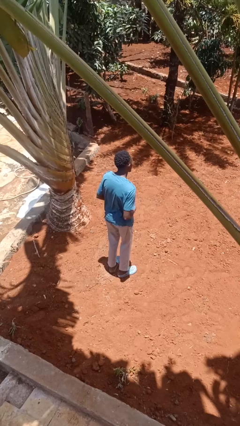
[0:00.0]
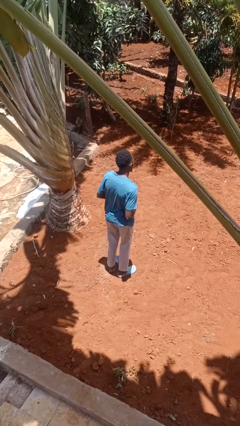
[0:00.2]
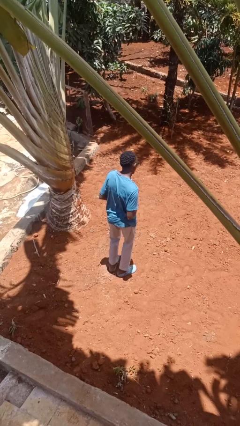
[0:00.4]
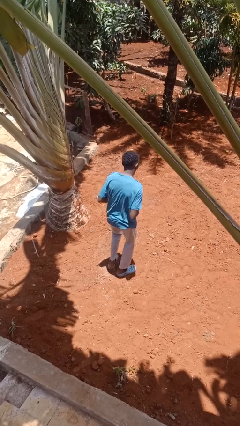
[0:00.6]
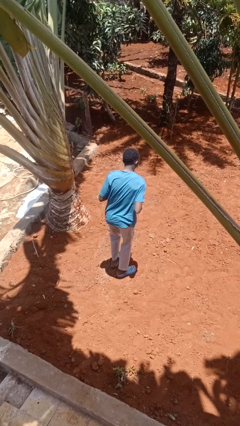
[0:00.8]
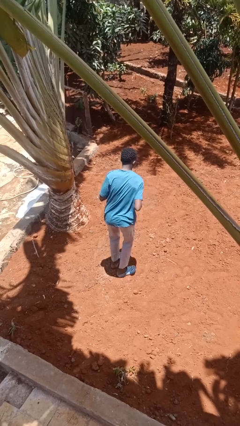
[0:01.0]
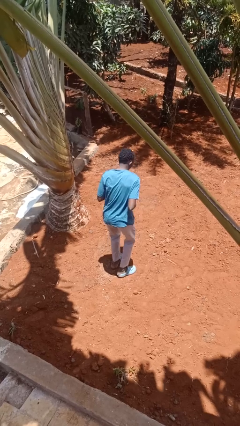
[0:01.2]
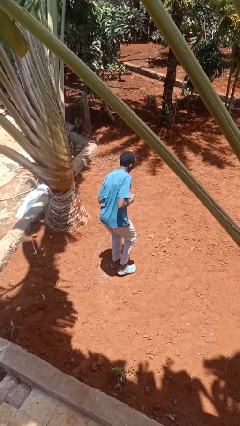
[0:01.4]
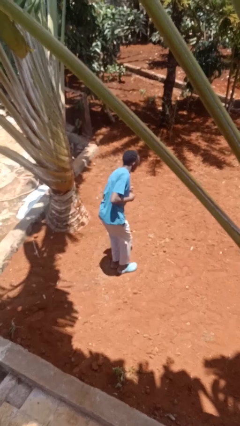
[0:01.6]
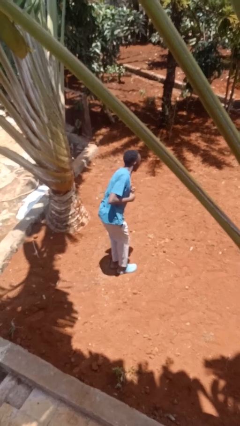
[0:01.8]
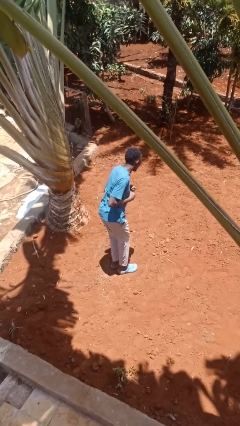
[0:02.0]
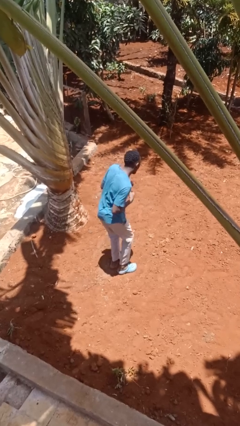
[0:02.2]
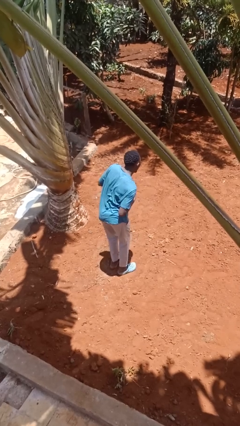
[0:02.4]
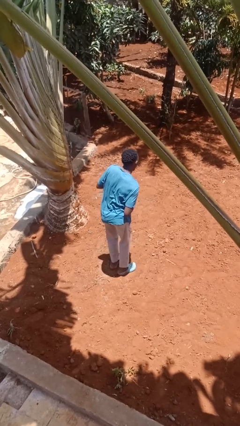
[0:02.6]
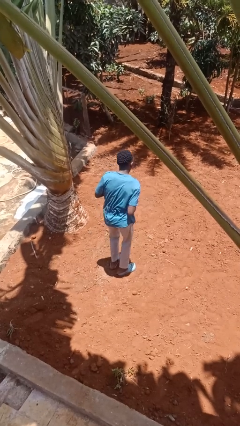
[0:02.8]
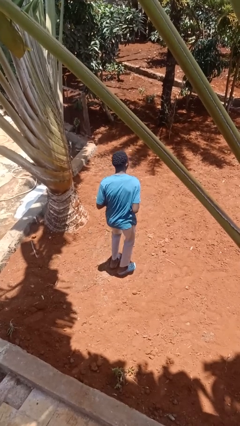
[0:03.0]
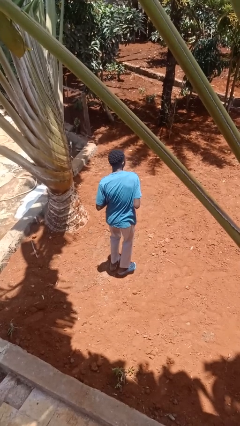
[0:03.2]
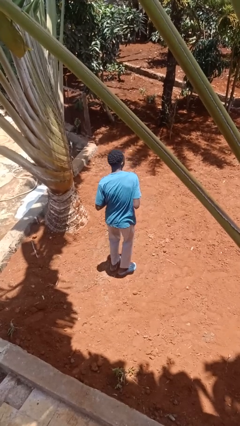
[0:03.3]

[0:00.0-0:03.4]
person dances in place

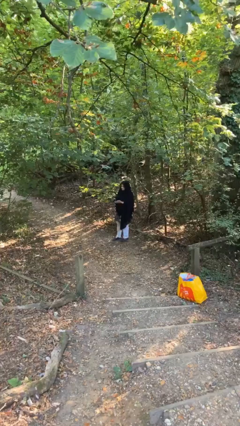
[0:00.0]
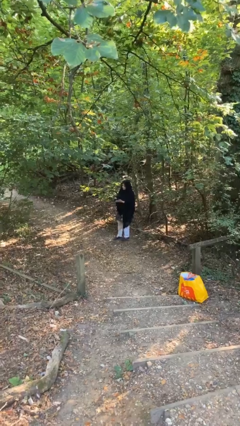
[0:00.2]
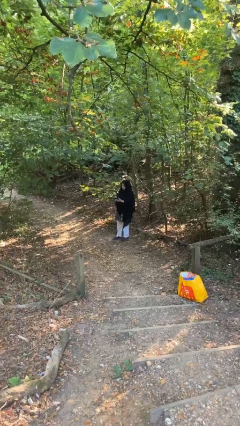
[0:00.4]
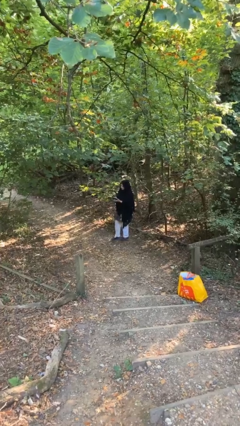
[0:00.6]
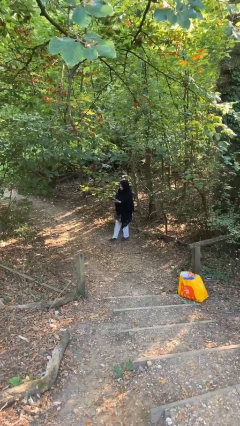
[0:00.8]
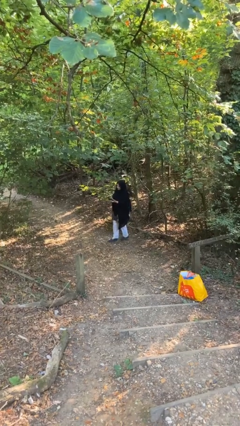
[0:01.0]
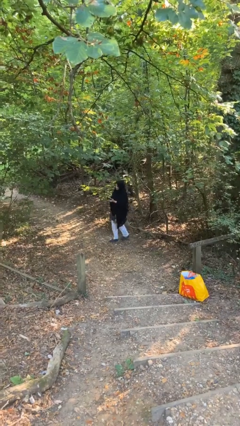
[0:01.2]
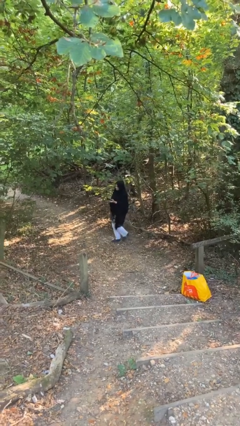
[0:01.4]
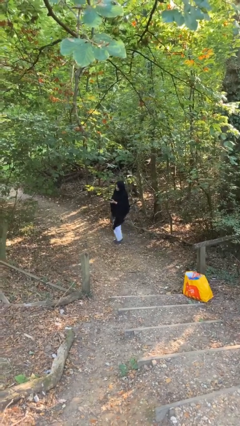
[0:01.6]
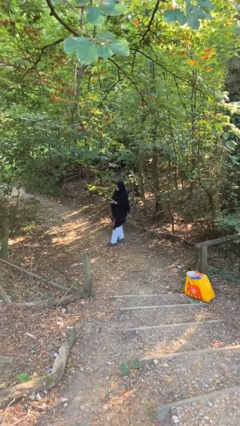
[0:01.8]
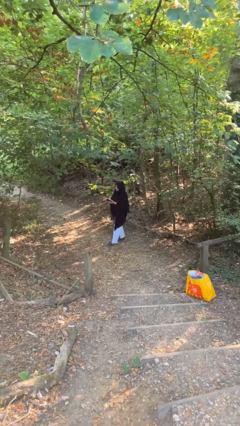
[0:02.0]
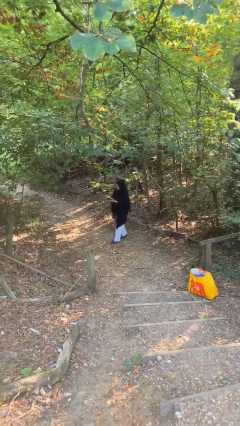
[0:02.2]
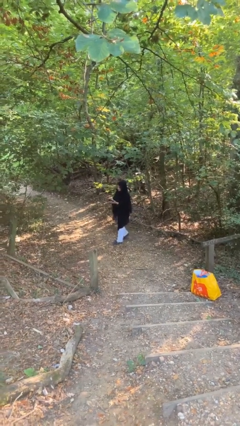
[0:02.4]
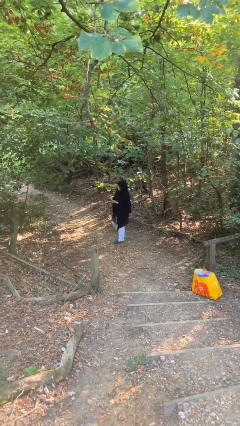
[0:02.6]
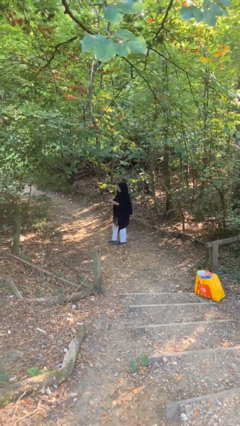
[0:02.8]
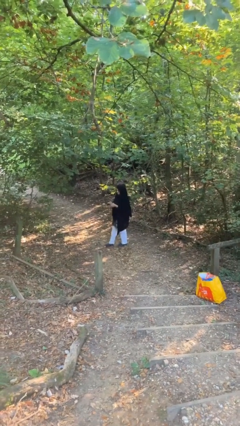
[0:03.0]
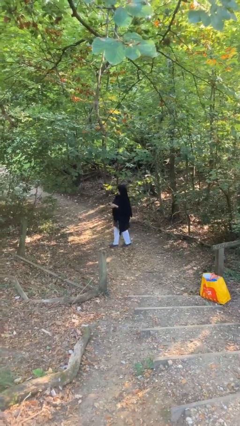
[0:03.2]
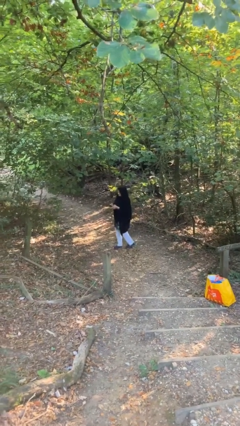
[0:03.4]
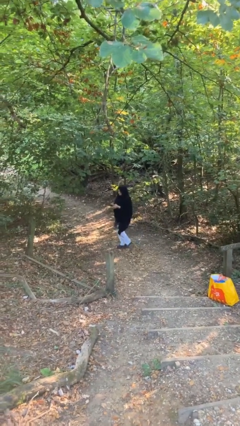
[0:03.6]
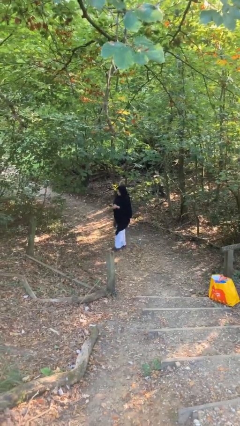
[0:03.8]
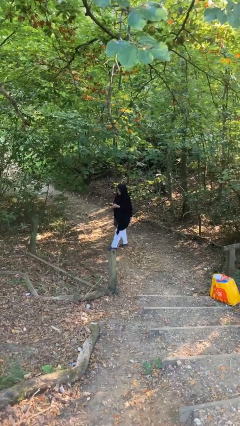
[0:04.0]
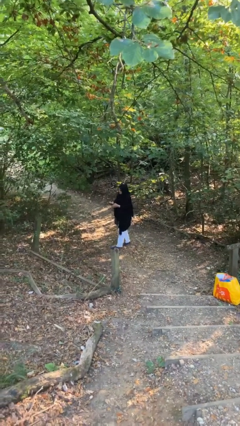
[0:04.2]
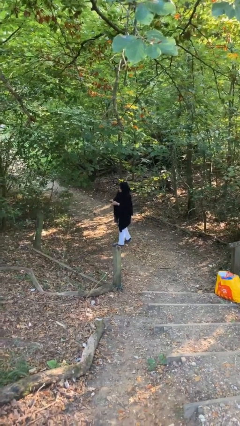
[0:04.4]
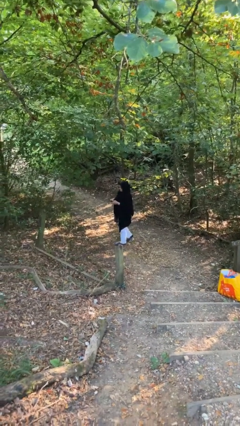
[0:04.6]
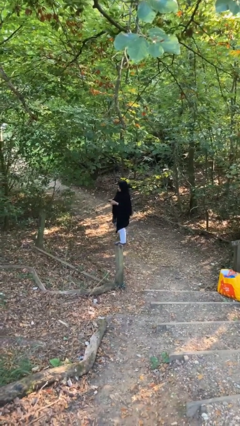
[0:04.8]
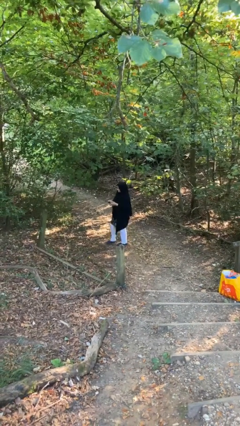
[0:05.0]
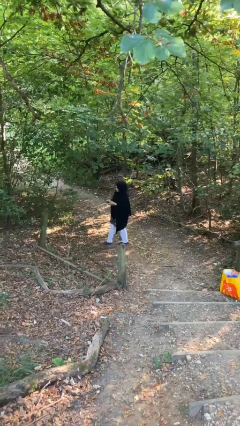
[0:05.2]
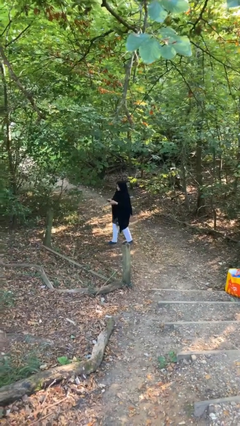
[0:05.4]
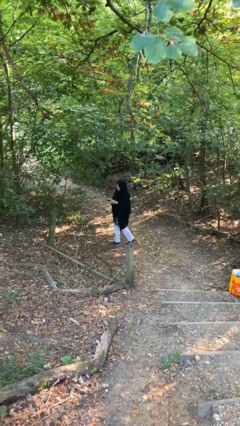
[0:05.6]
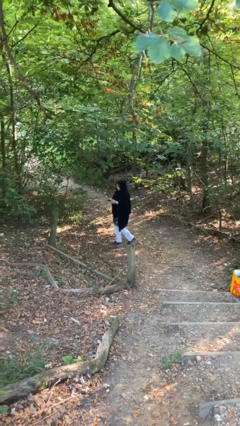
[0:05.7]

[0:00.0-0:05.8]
person texts on phone

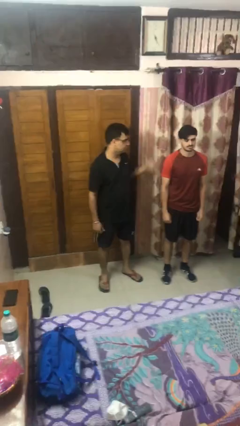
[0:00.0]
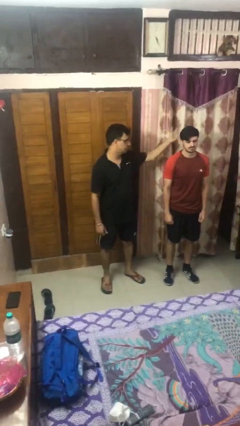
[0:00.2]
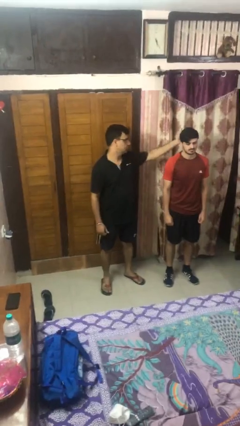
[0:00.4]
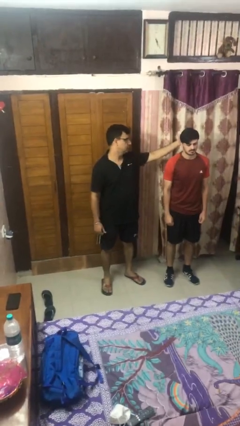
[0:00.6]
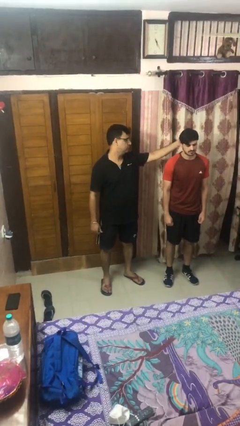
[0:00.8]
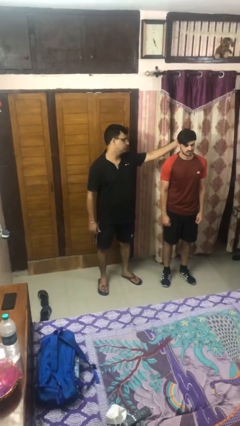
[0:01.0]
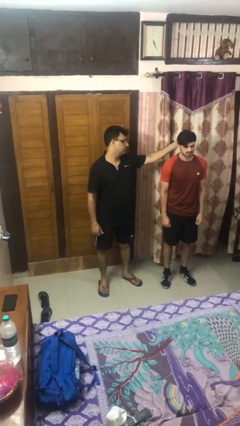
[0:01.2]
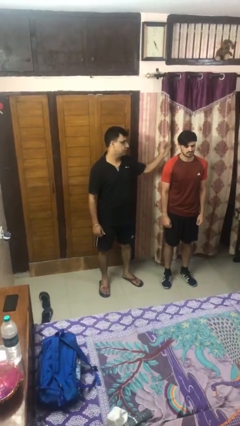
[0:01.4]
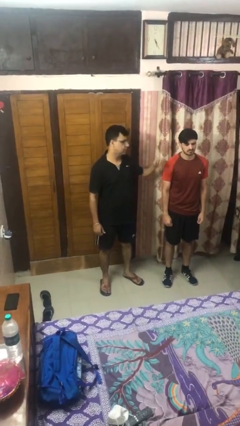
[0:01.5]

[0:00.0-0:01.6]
person grabs person by hair

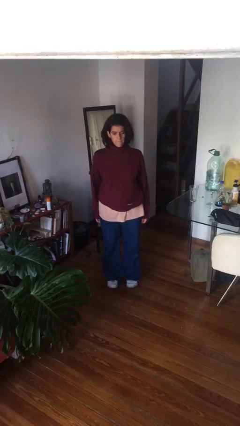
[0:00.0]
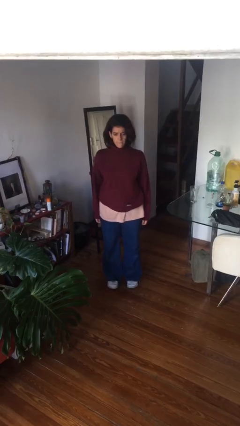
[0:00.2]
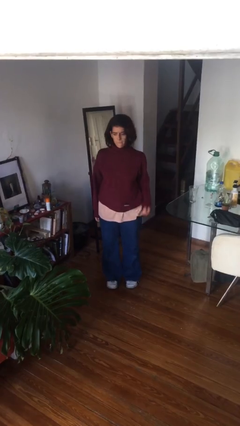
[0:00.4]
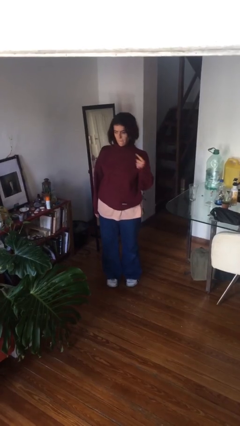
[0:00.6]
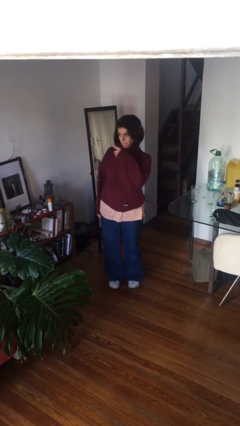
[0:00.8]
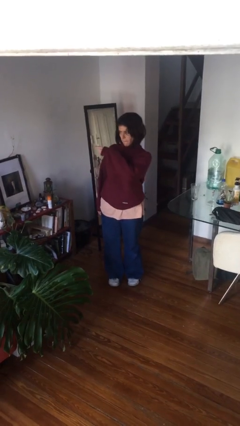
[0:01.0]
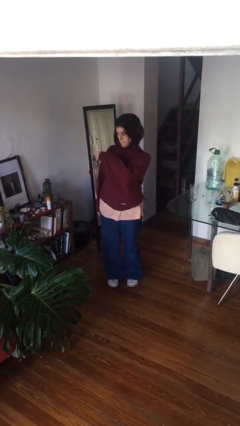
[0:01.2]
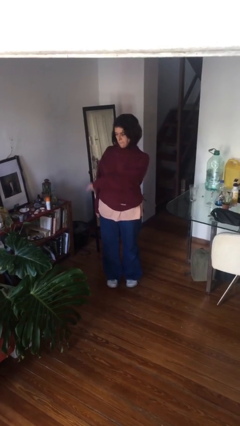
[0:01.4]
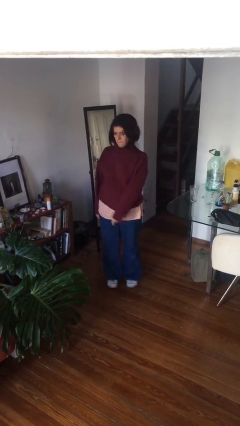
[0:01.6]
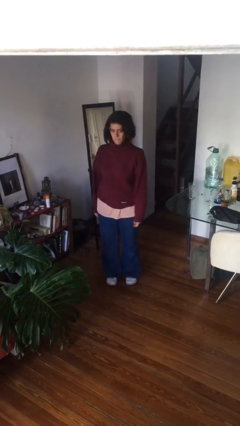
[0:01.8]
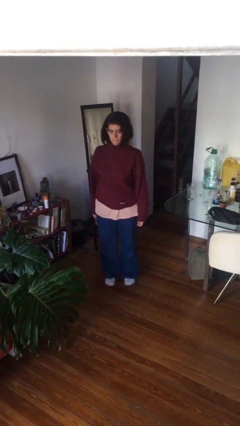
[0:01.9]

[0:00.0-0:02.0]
person gestures swipe right

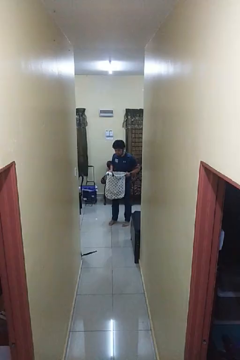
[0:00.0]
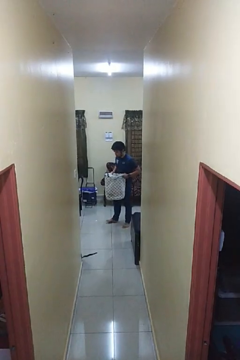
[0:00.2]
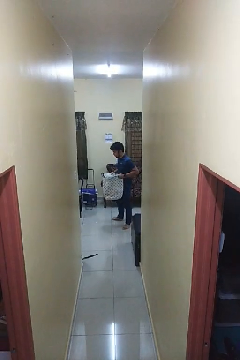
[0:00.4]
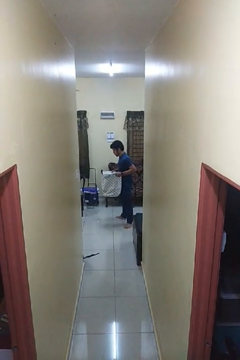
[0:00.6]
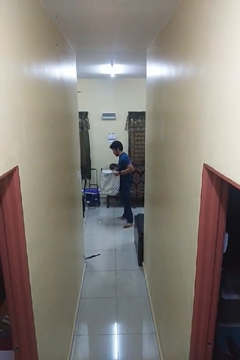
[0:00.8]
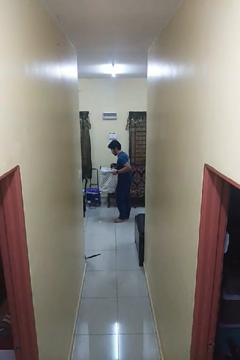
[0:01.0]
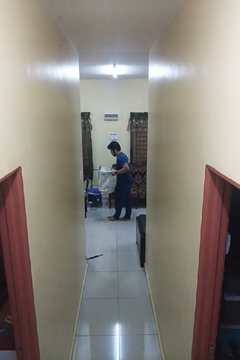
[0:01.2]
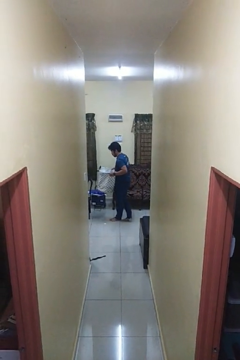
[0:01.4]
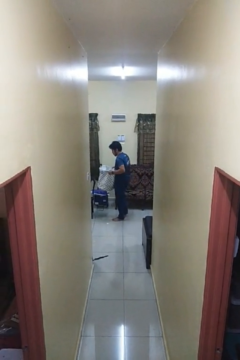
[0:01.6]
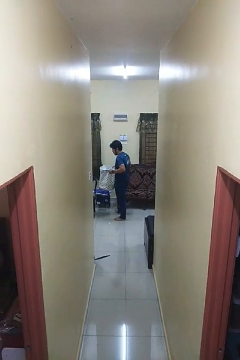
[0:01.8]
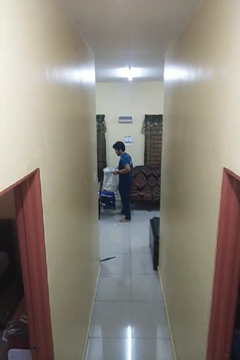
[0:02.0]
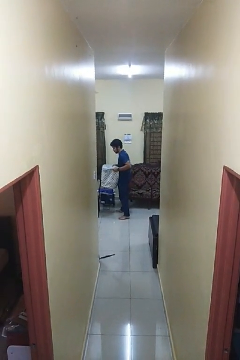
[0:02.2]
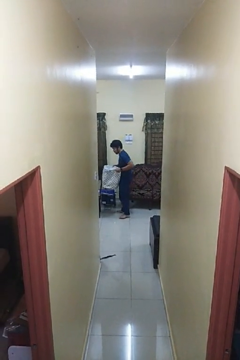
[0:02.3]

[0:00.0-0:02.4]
person carries laundry basket

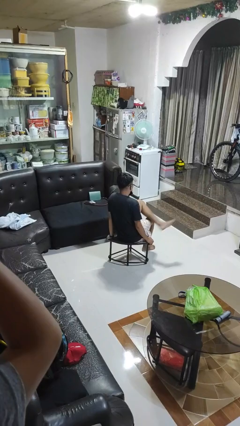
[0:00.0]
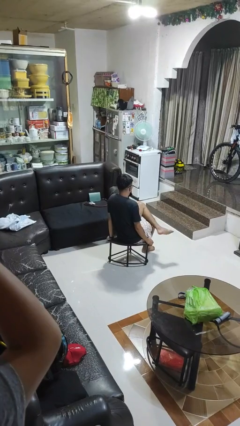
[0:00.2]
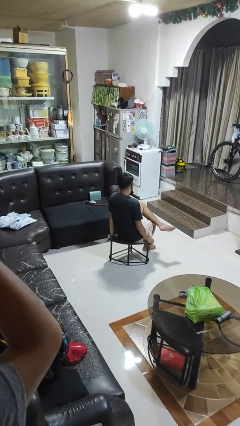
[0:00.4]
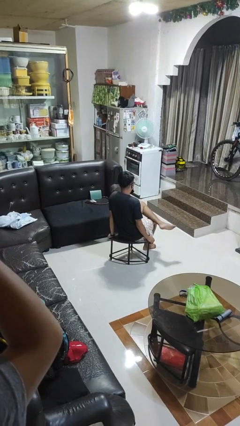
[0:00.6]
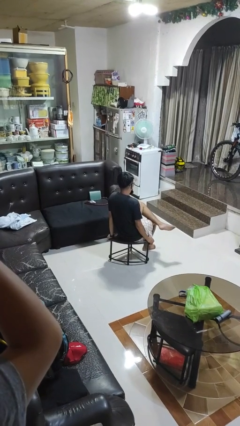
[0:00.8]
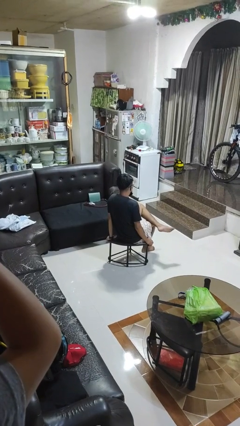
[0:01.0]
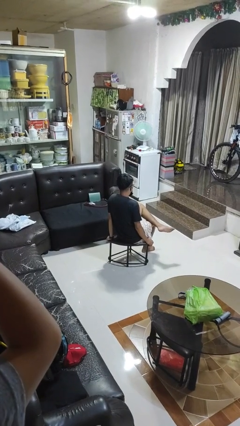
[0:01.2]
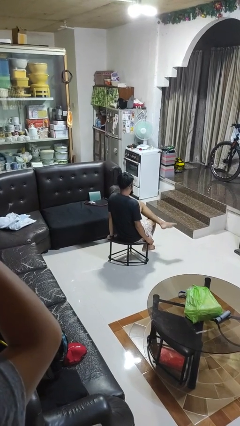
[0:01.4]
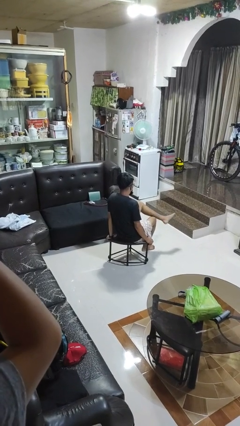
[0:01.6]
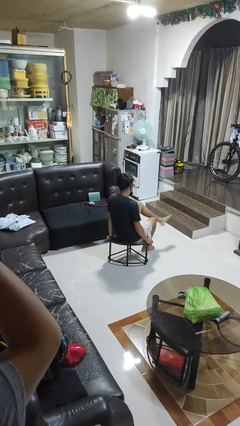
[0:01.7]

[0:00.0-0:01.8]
person crosses legs

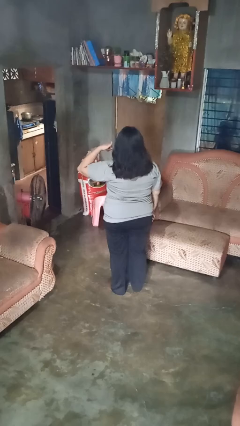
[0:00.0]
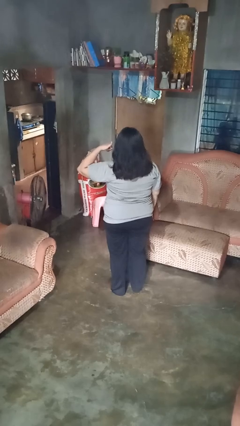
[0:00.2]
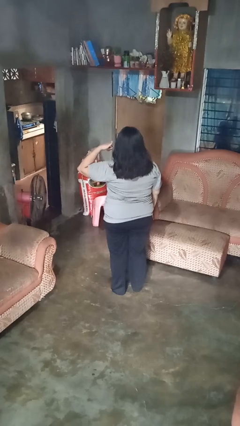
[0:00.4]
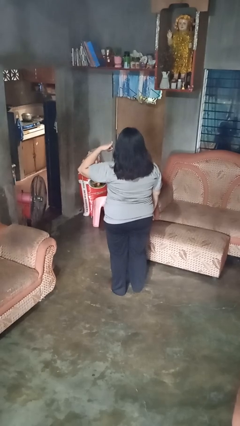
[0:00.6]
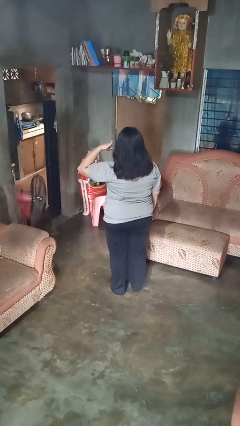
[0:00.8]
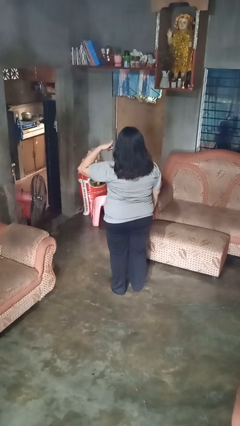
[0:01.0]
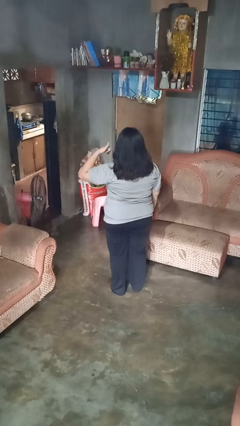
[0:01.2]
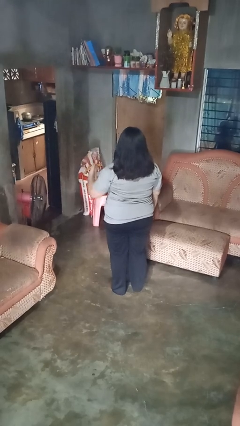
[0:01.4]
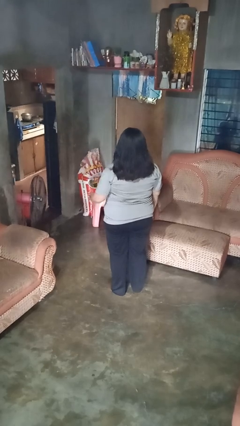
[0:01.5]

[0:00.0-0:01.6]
person gestures call me
